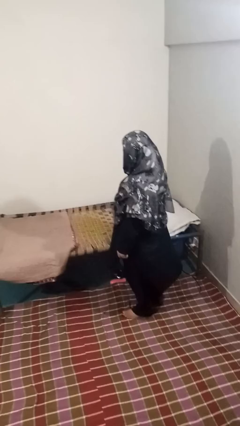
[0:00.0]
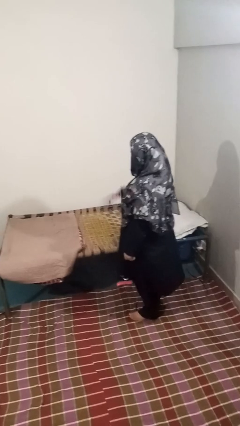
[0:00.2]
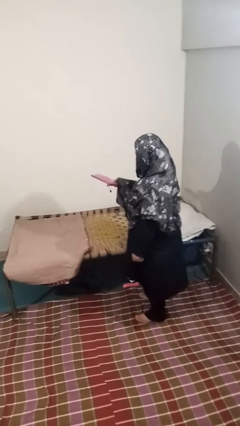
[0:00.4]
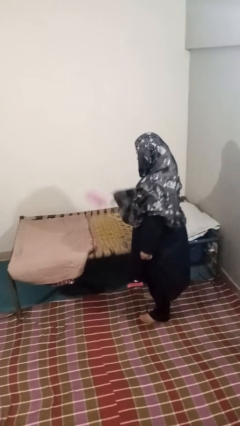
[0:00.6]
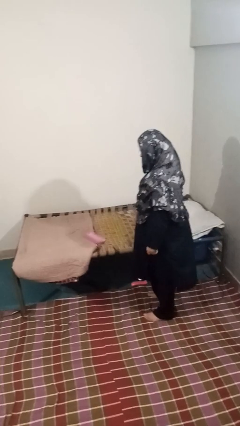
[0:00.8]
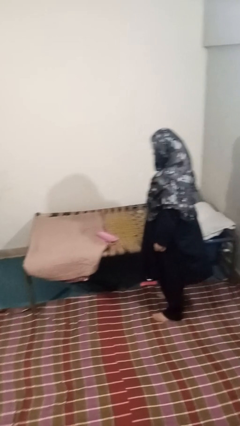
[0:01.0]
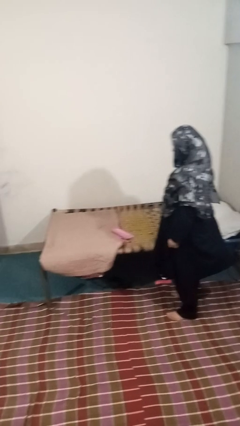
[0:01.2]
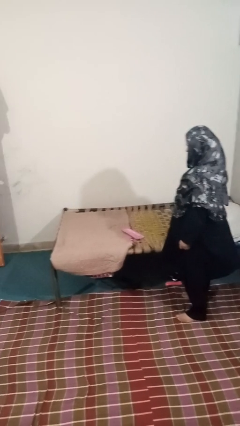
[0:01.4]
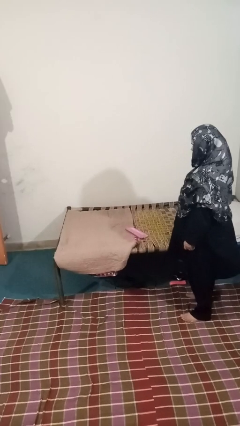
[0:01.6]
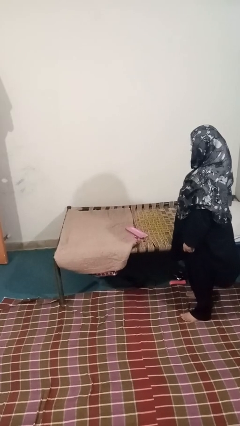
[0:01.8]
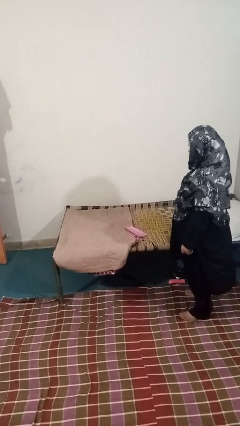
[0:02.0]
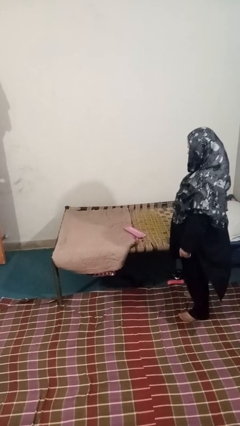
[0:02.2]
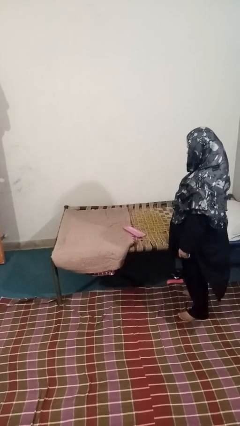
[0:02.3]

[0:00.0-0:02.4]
person picks up object from bed

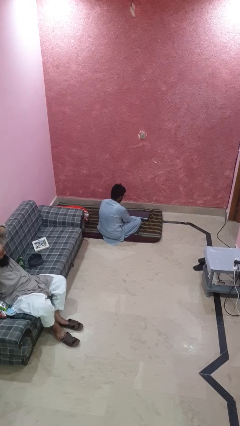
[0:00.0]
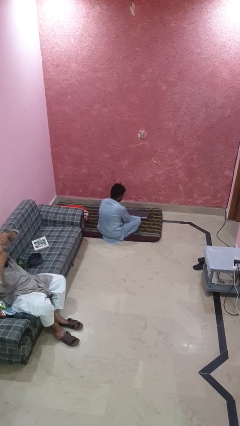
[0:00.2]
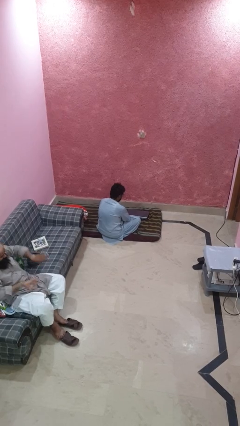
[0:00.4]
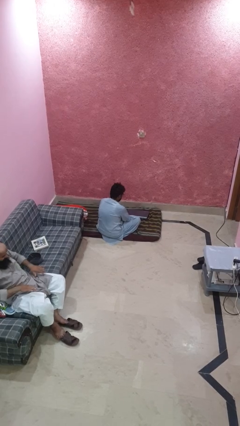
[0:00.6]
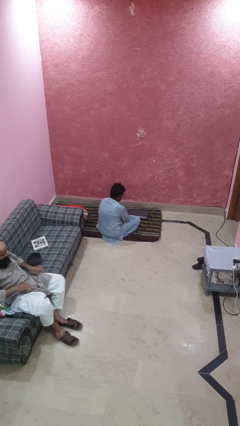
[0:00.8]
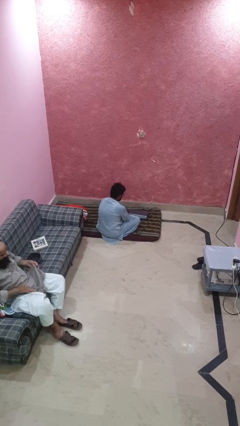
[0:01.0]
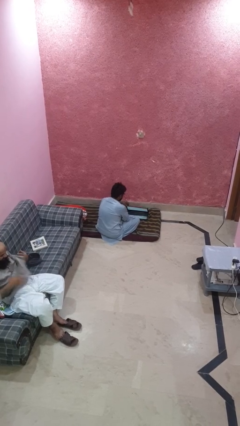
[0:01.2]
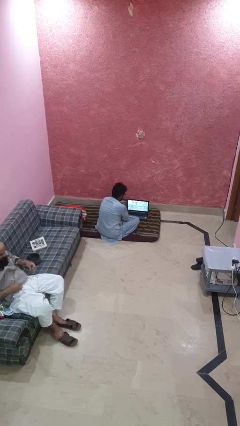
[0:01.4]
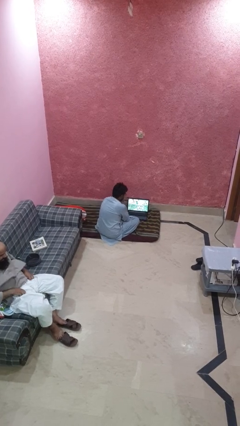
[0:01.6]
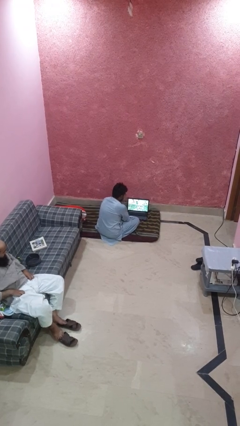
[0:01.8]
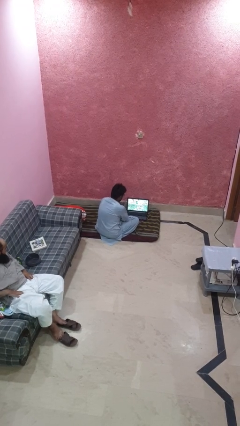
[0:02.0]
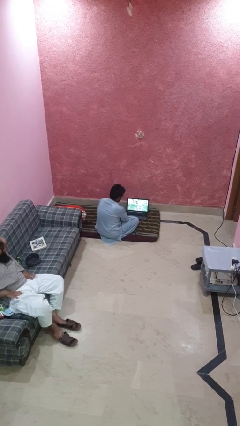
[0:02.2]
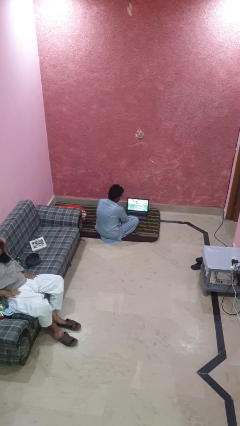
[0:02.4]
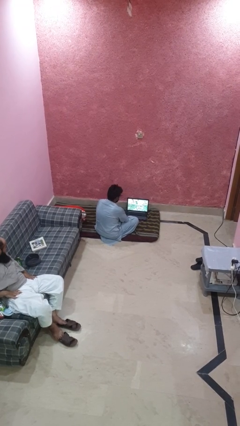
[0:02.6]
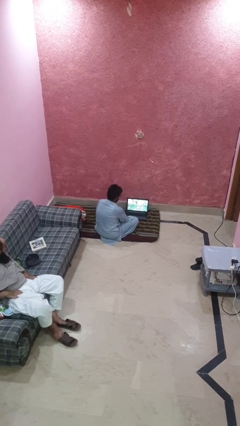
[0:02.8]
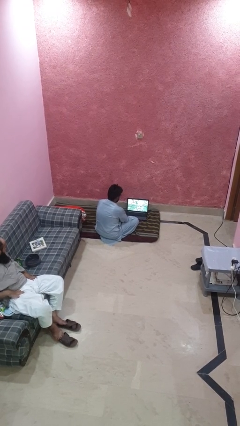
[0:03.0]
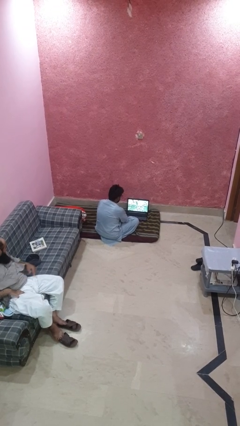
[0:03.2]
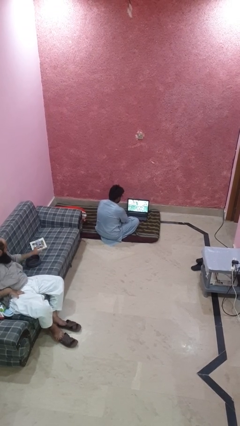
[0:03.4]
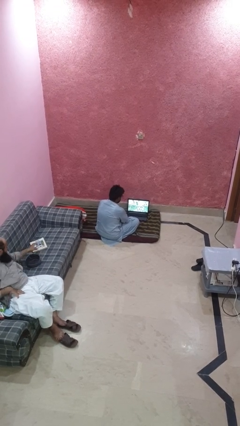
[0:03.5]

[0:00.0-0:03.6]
person opens laptop

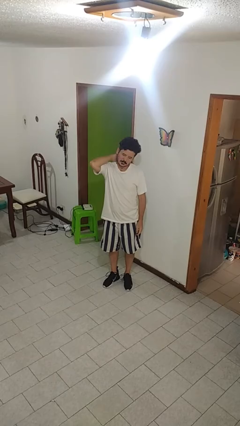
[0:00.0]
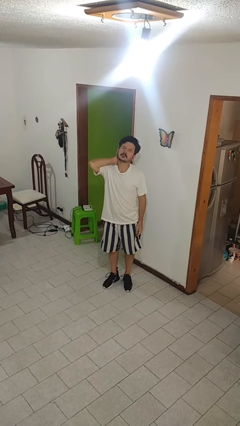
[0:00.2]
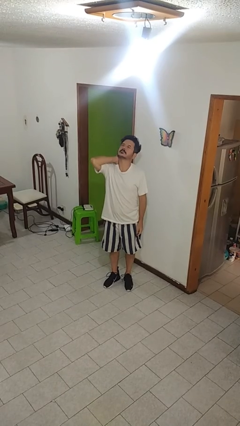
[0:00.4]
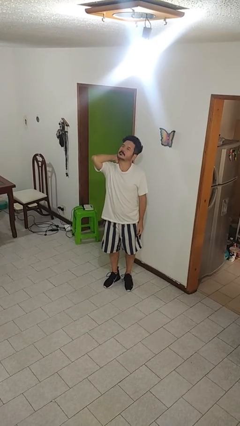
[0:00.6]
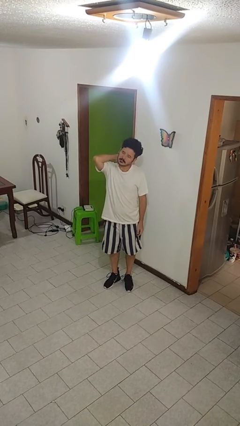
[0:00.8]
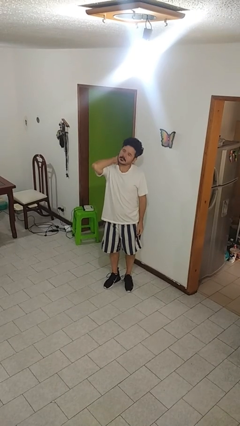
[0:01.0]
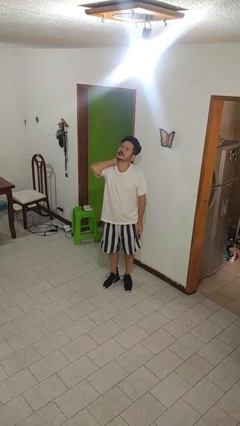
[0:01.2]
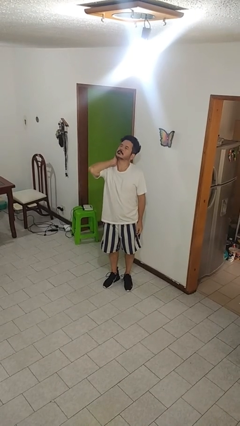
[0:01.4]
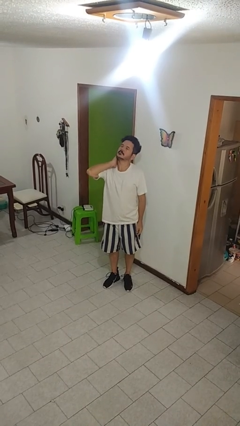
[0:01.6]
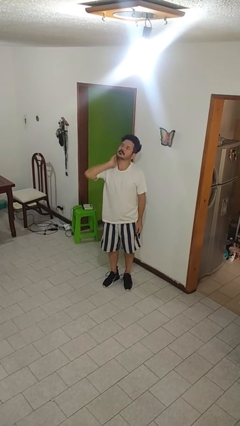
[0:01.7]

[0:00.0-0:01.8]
person rubs neck

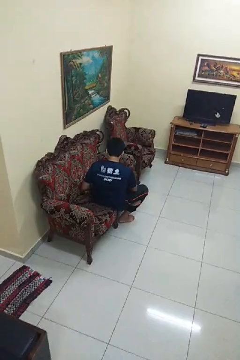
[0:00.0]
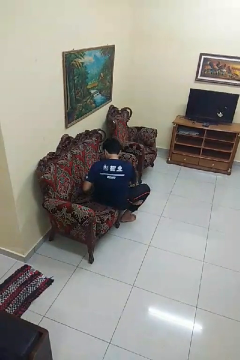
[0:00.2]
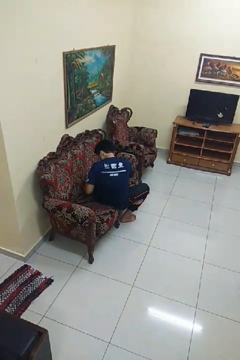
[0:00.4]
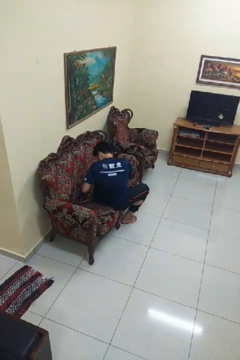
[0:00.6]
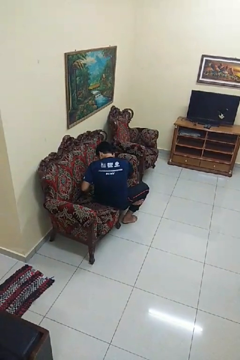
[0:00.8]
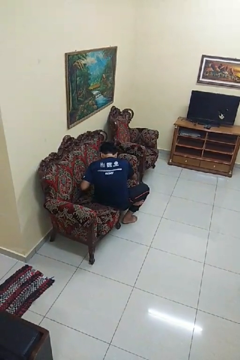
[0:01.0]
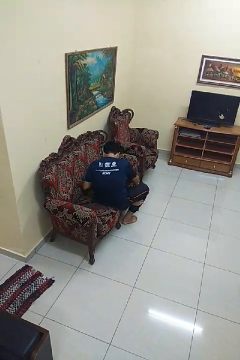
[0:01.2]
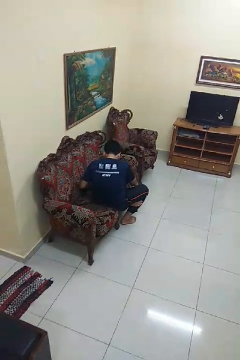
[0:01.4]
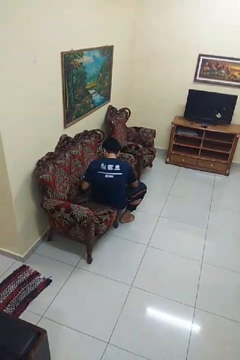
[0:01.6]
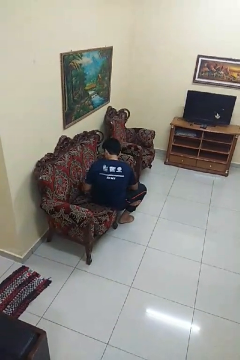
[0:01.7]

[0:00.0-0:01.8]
person searches in couch

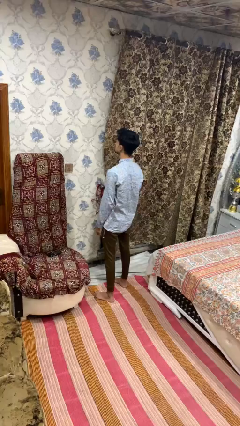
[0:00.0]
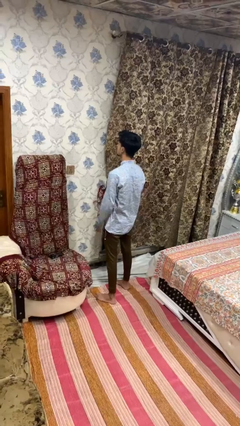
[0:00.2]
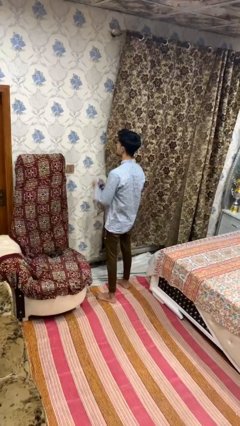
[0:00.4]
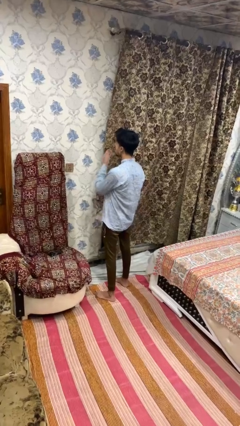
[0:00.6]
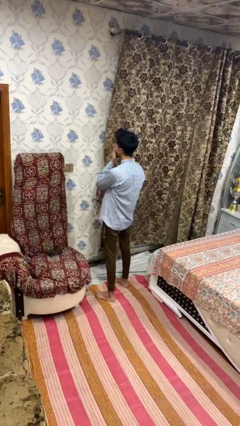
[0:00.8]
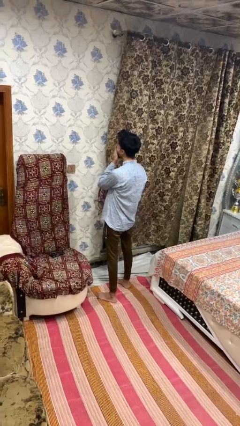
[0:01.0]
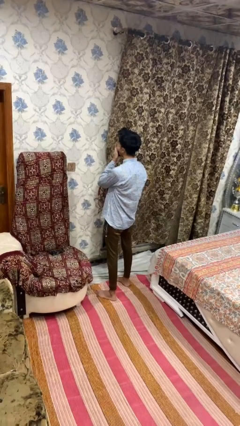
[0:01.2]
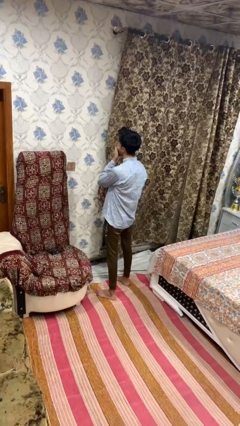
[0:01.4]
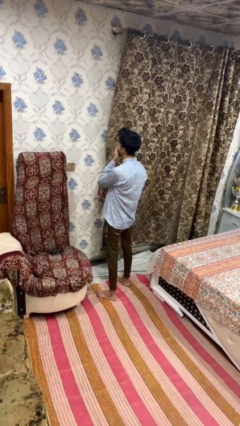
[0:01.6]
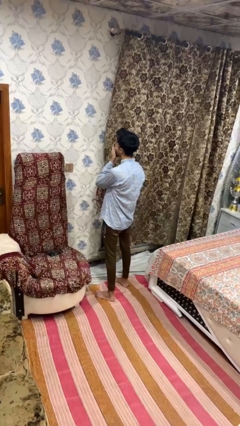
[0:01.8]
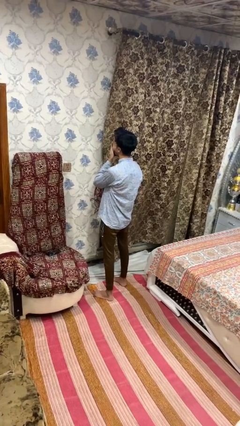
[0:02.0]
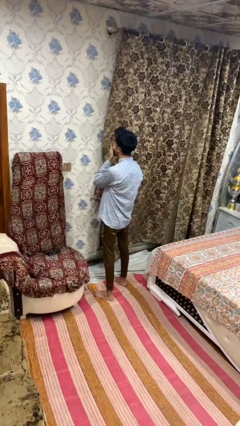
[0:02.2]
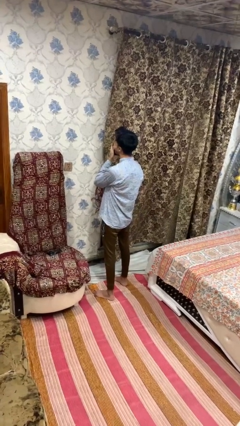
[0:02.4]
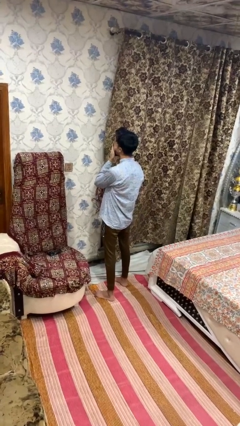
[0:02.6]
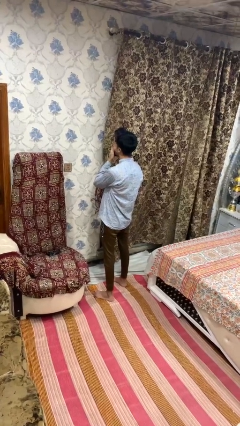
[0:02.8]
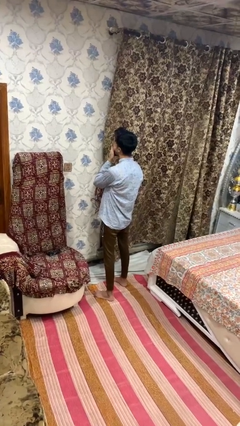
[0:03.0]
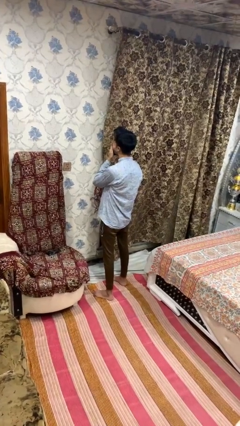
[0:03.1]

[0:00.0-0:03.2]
person yawns

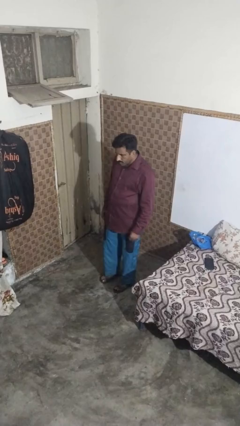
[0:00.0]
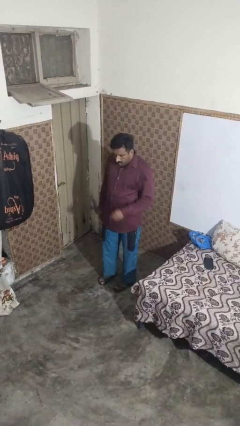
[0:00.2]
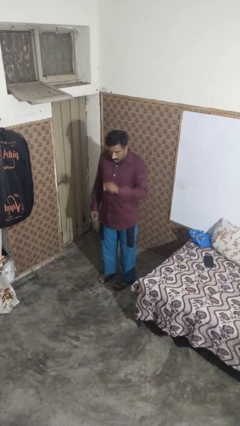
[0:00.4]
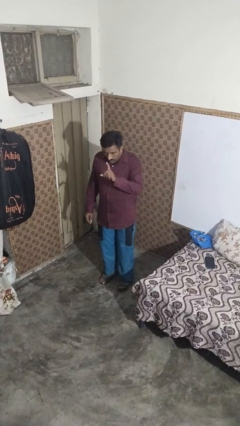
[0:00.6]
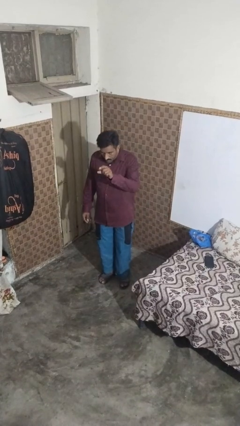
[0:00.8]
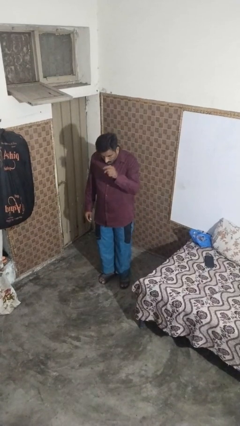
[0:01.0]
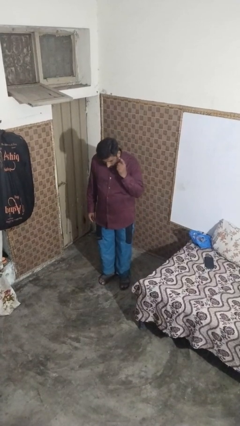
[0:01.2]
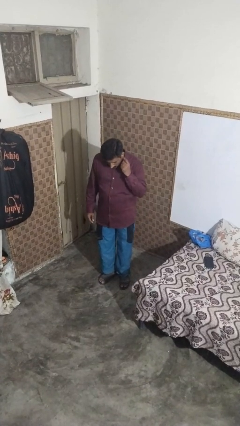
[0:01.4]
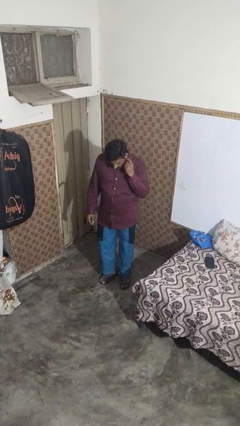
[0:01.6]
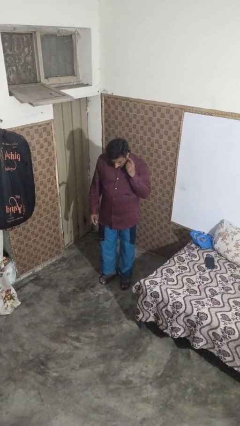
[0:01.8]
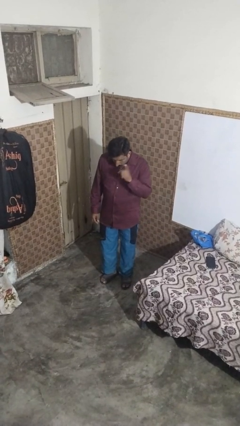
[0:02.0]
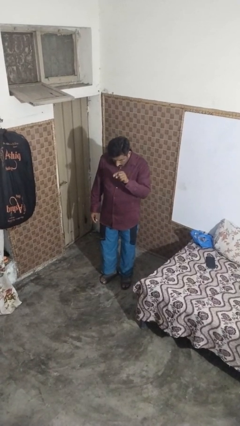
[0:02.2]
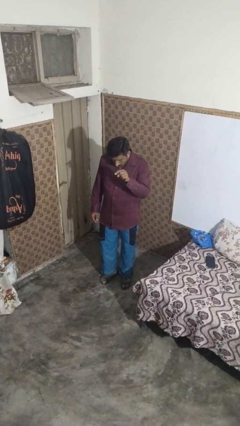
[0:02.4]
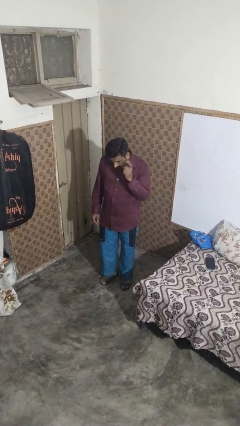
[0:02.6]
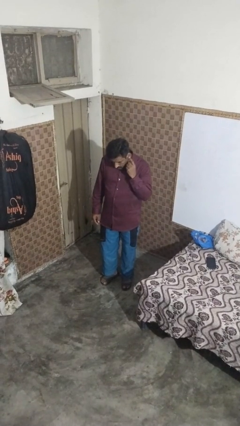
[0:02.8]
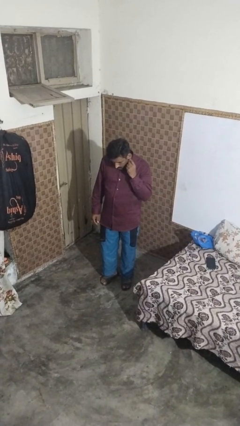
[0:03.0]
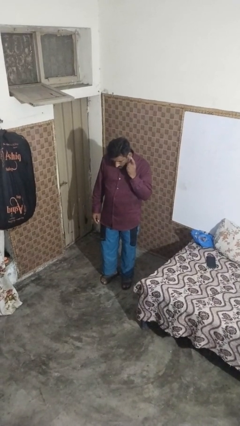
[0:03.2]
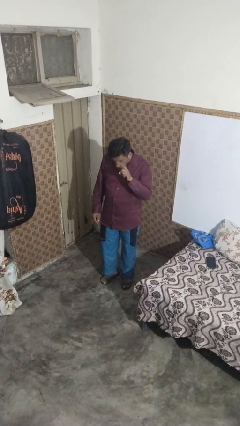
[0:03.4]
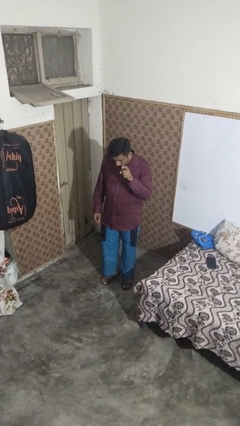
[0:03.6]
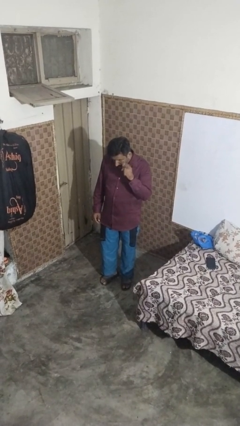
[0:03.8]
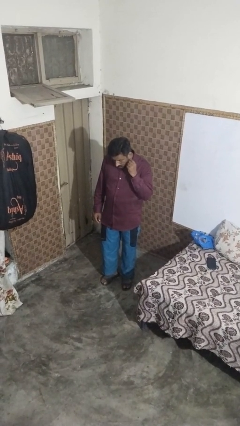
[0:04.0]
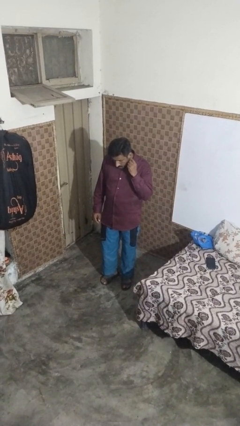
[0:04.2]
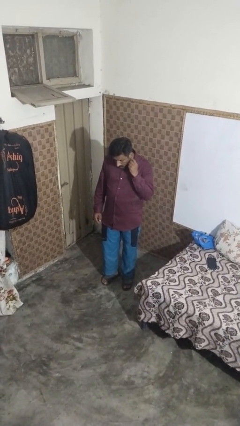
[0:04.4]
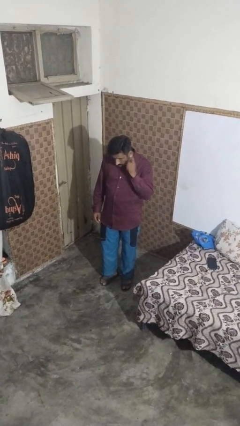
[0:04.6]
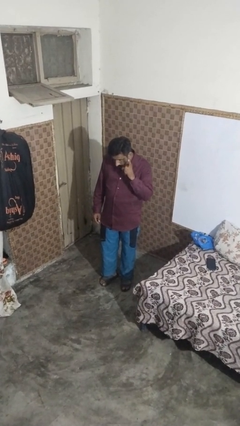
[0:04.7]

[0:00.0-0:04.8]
person gestures listen closely

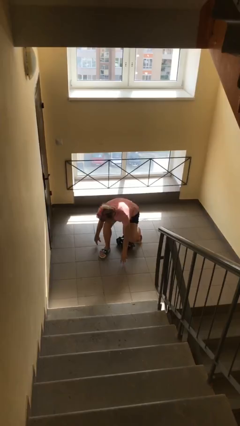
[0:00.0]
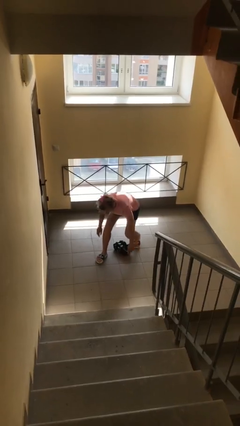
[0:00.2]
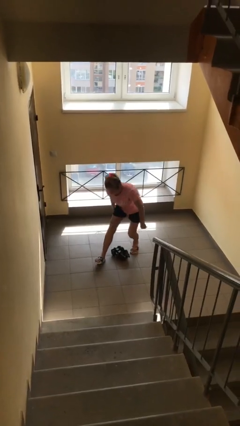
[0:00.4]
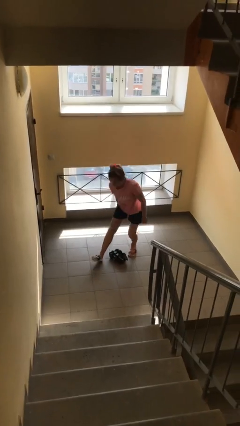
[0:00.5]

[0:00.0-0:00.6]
person stands up from floor
